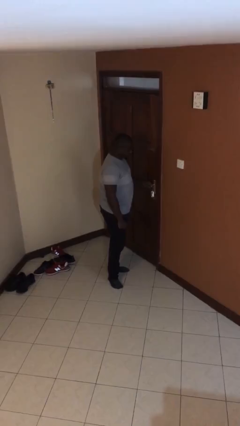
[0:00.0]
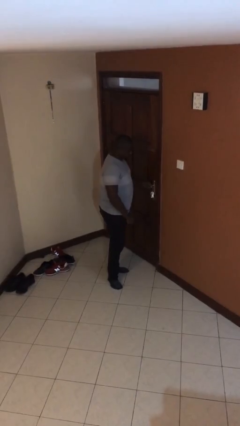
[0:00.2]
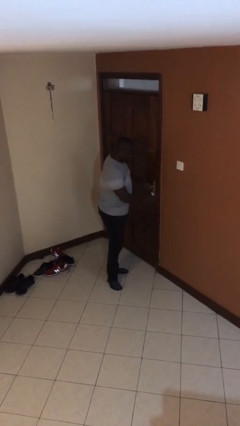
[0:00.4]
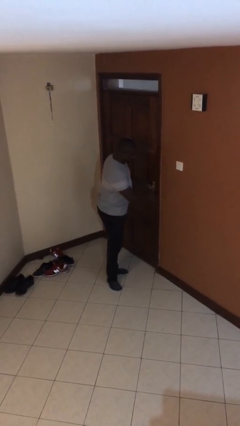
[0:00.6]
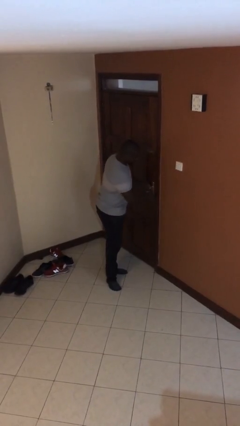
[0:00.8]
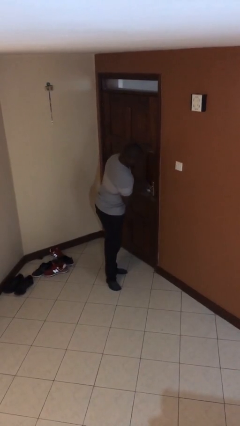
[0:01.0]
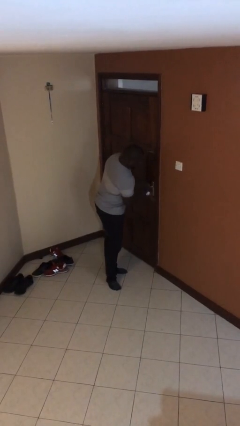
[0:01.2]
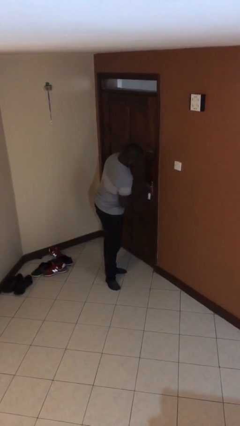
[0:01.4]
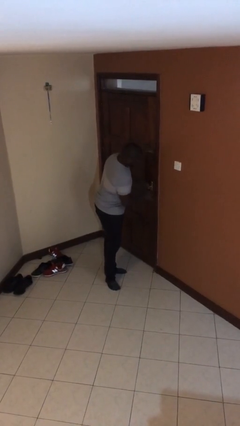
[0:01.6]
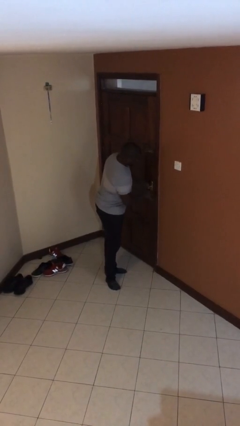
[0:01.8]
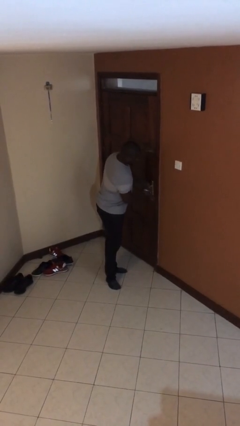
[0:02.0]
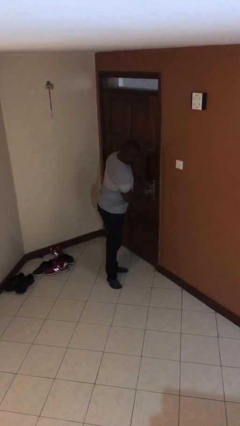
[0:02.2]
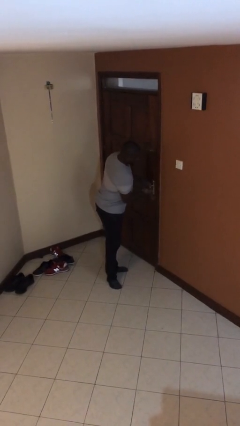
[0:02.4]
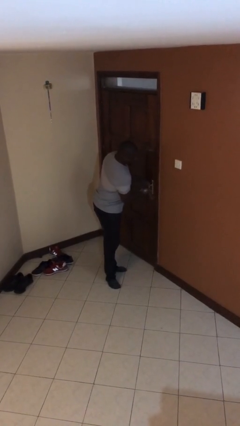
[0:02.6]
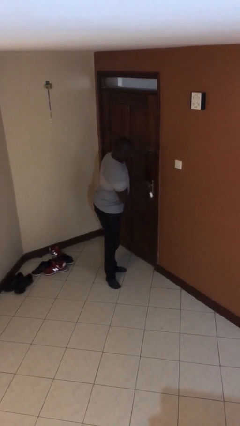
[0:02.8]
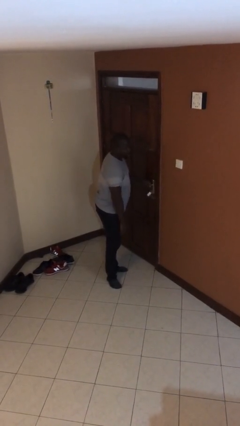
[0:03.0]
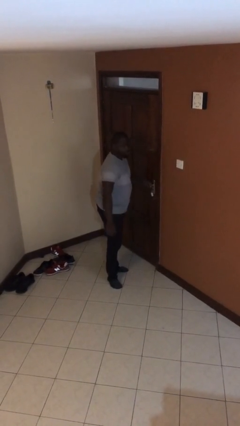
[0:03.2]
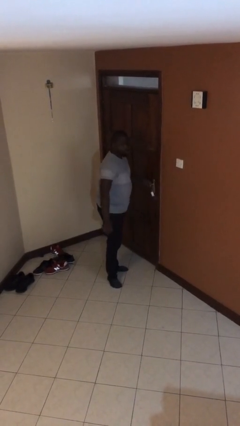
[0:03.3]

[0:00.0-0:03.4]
person locks door with keys

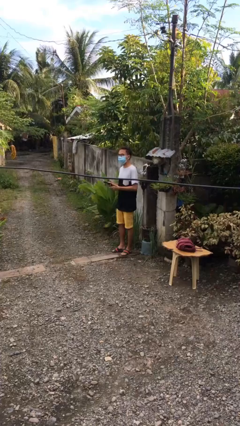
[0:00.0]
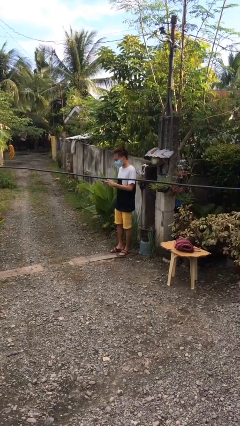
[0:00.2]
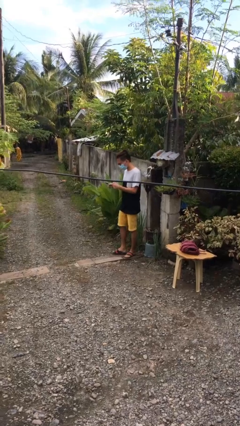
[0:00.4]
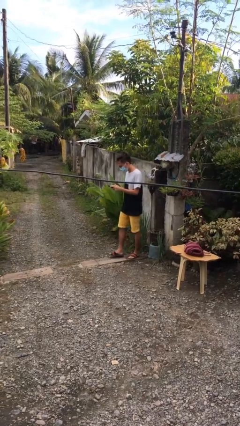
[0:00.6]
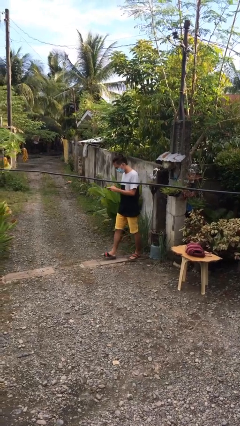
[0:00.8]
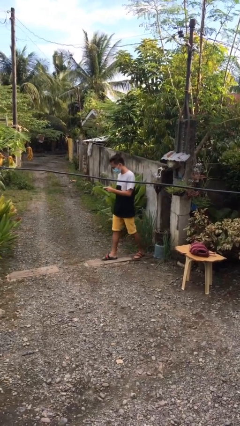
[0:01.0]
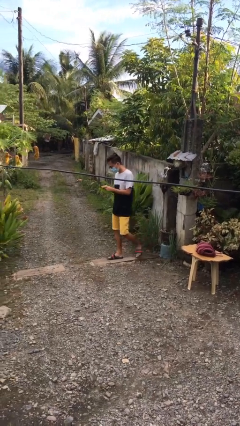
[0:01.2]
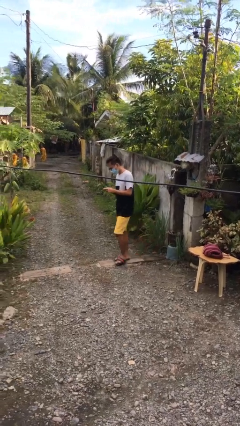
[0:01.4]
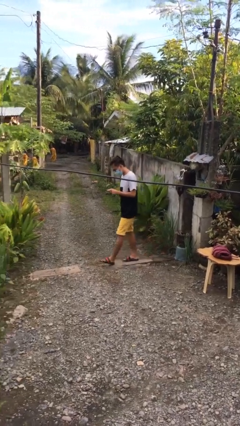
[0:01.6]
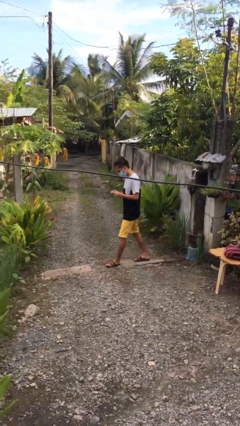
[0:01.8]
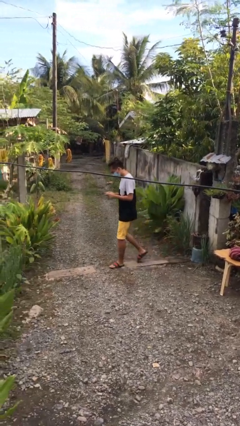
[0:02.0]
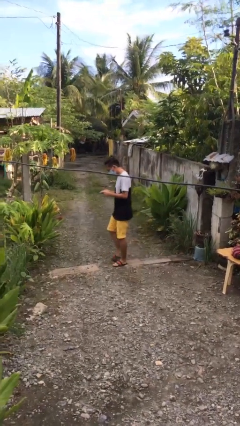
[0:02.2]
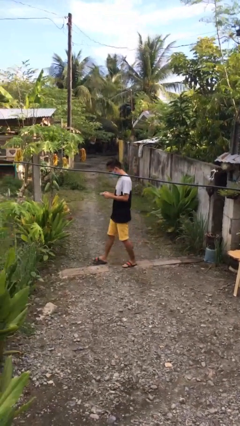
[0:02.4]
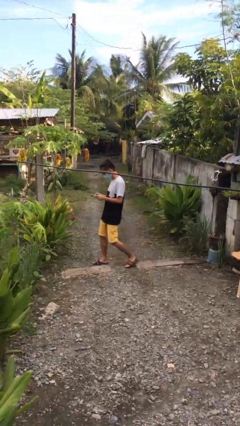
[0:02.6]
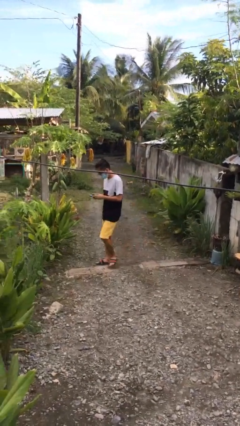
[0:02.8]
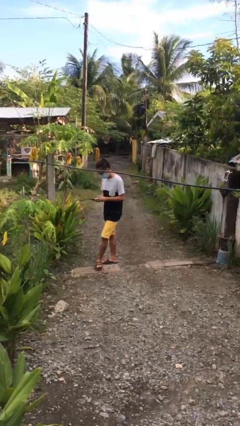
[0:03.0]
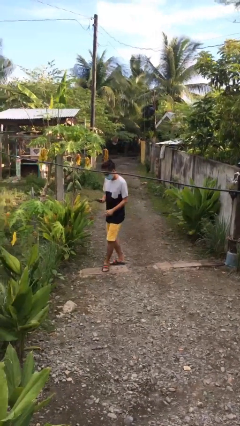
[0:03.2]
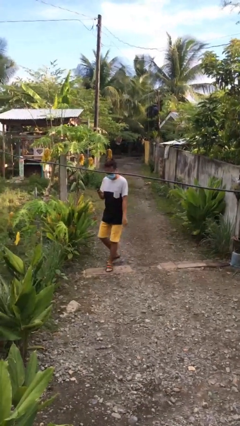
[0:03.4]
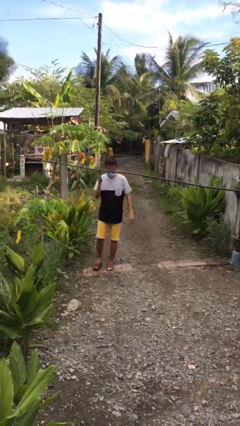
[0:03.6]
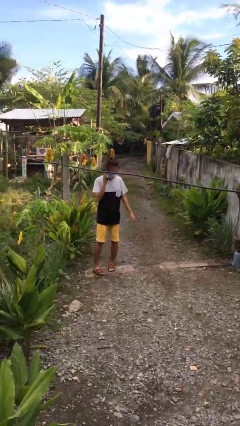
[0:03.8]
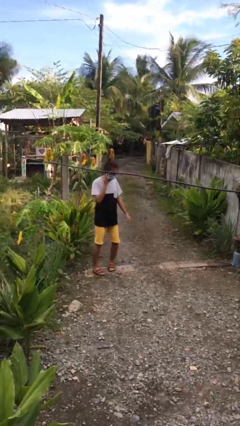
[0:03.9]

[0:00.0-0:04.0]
person texts on phone

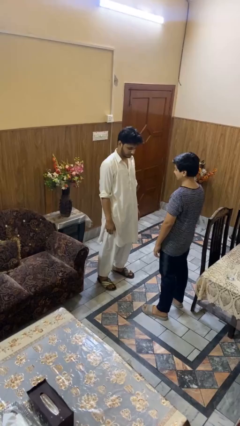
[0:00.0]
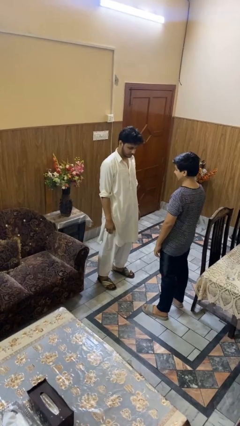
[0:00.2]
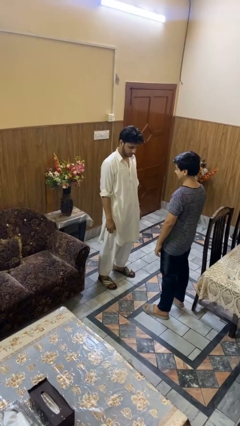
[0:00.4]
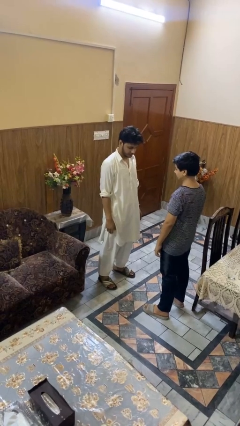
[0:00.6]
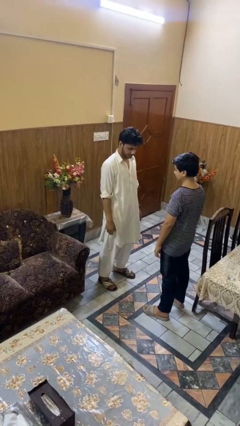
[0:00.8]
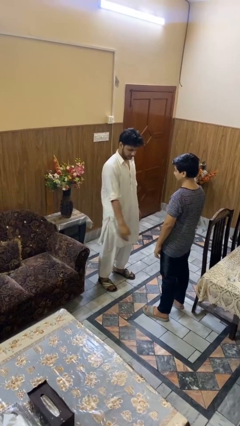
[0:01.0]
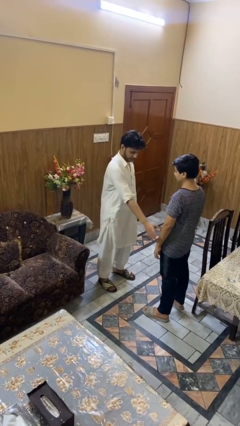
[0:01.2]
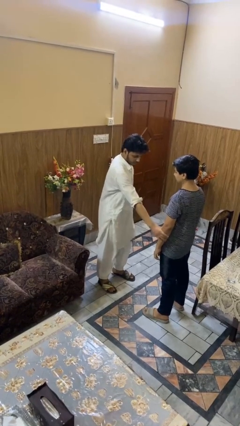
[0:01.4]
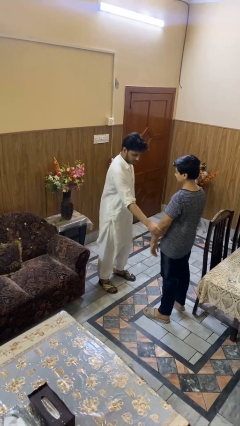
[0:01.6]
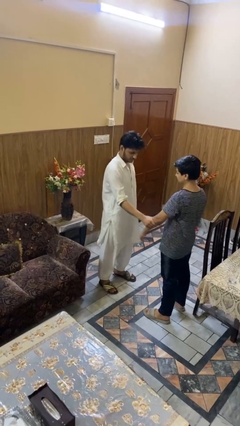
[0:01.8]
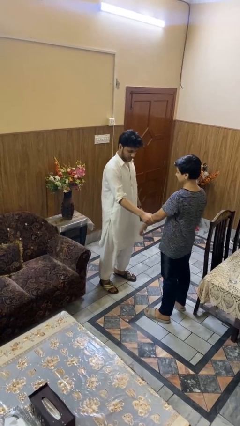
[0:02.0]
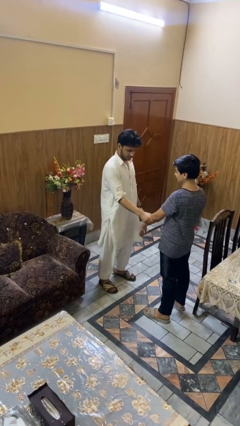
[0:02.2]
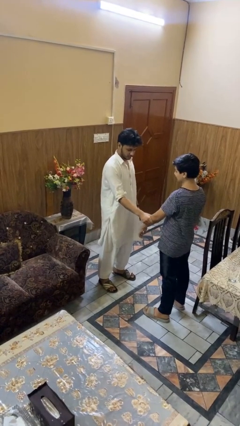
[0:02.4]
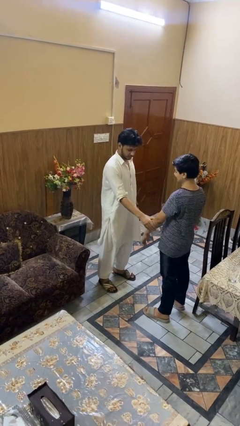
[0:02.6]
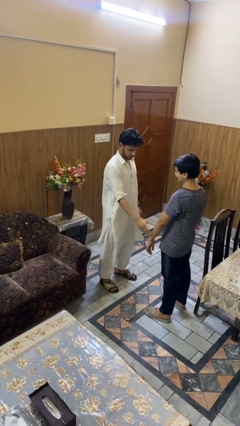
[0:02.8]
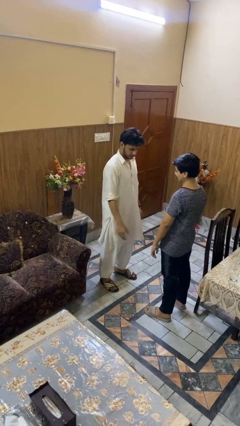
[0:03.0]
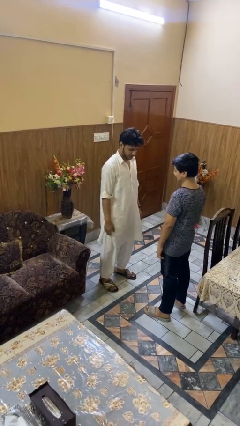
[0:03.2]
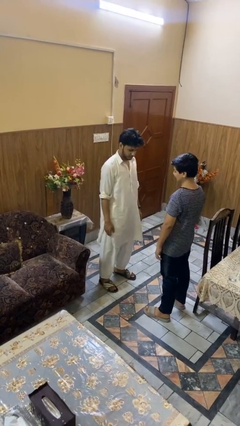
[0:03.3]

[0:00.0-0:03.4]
person grabs person by forearm

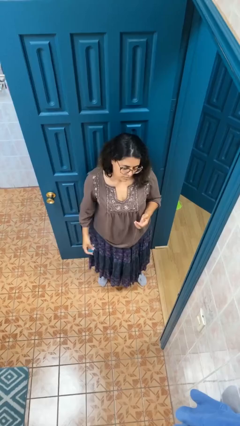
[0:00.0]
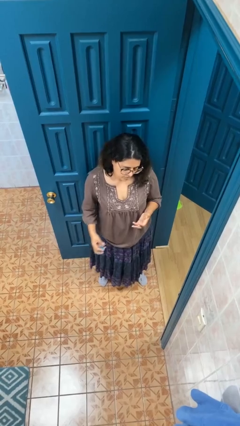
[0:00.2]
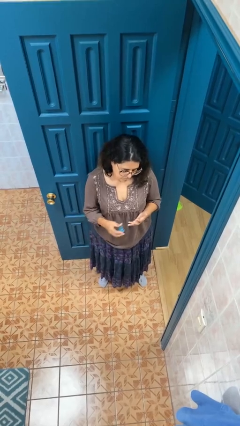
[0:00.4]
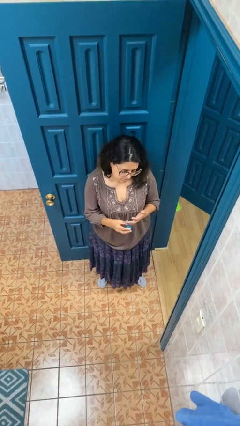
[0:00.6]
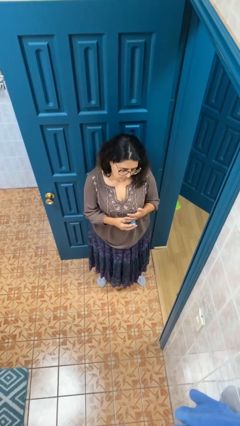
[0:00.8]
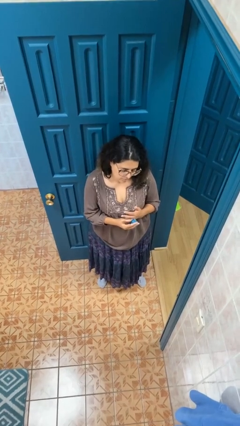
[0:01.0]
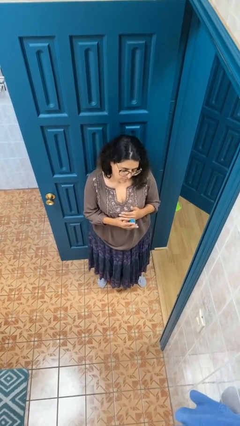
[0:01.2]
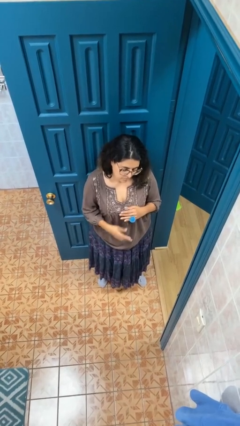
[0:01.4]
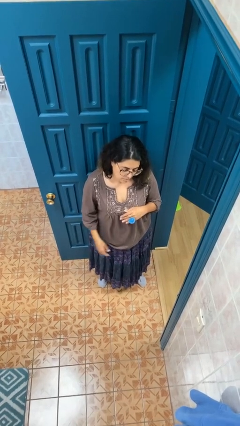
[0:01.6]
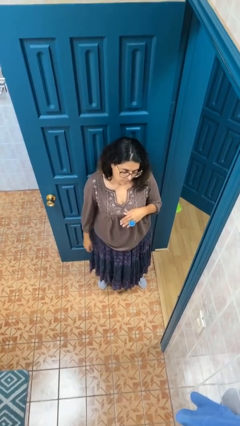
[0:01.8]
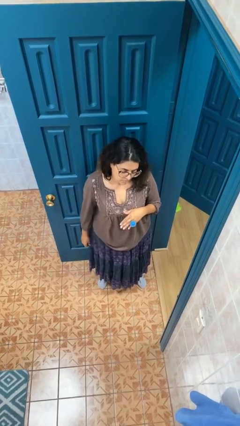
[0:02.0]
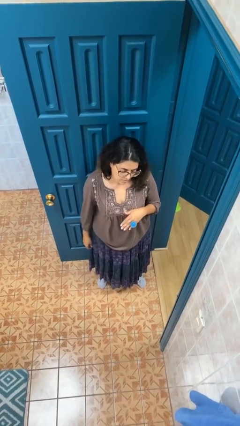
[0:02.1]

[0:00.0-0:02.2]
person puts on ring

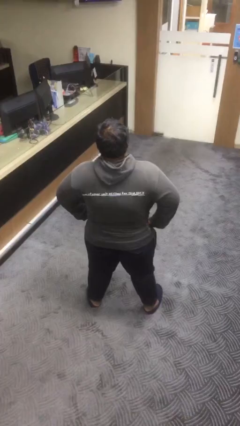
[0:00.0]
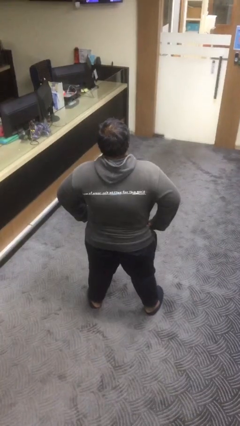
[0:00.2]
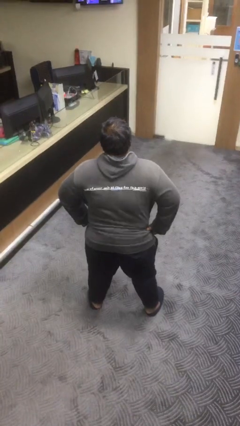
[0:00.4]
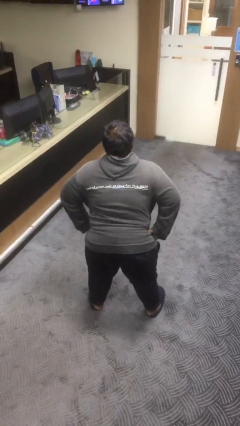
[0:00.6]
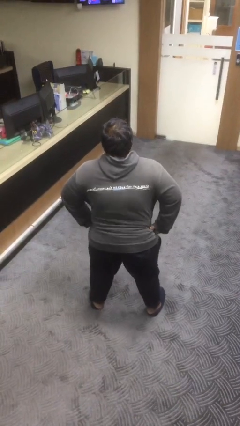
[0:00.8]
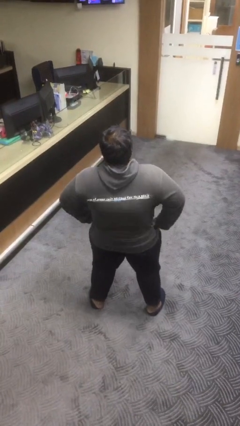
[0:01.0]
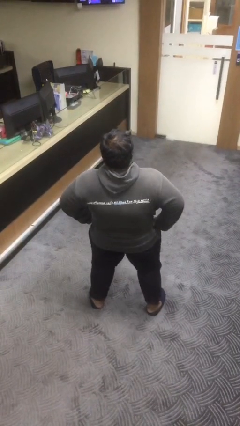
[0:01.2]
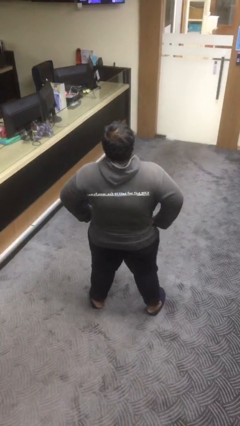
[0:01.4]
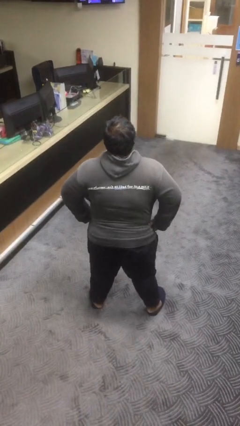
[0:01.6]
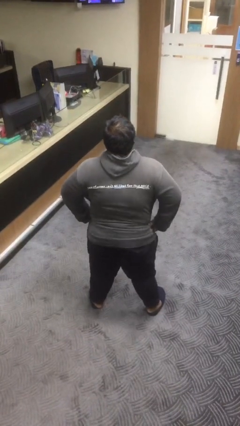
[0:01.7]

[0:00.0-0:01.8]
person wiggles hips

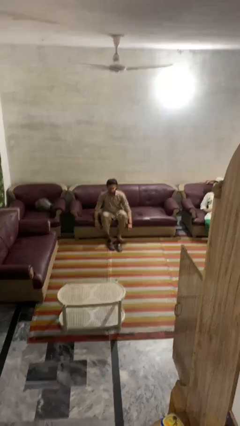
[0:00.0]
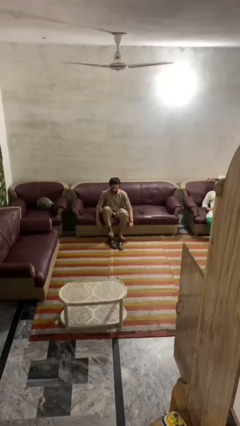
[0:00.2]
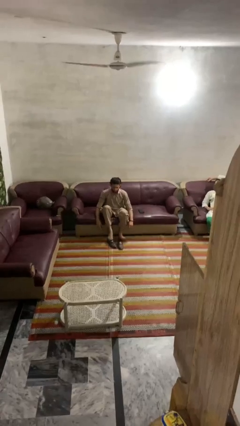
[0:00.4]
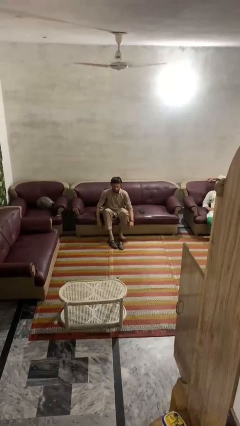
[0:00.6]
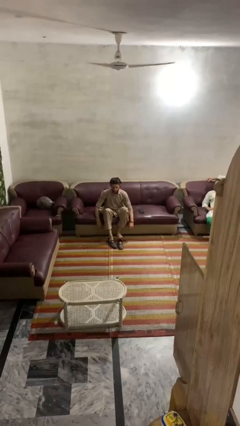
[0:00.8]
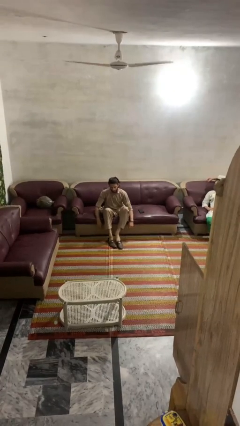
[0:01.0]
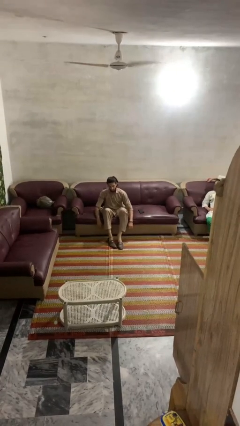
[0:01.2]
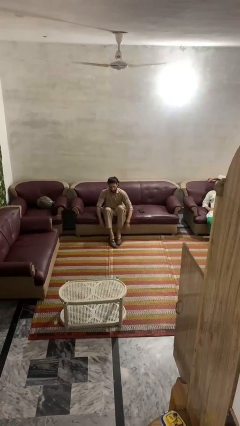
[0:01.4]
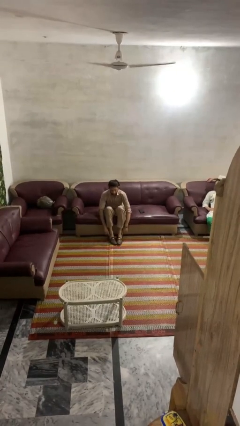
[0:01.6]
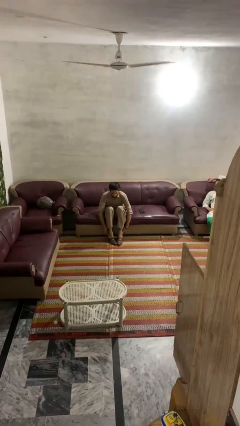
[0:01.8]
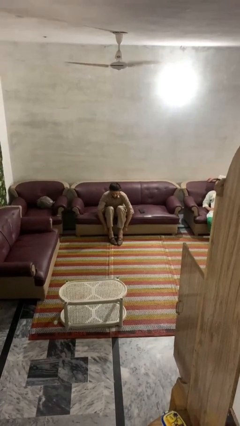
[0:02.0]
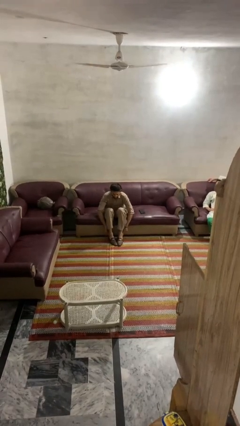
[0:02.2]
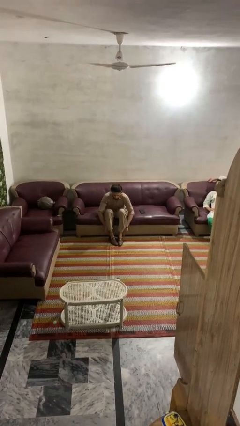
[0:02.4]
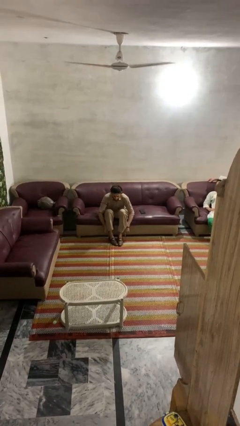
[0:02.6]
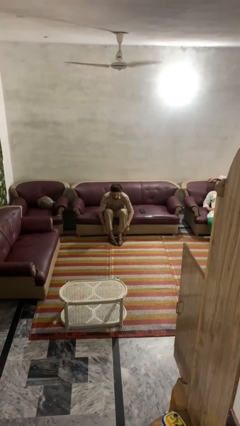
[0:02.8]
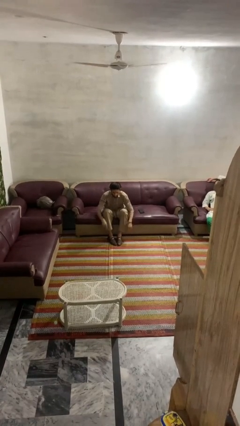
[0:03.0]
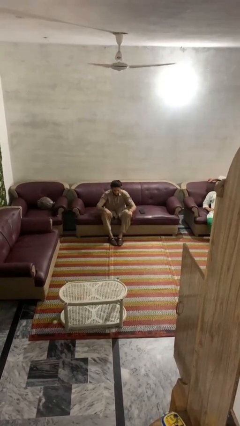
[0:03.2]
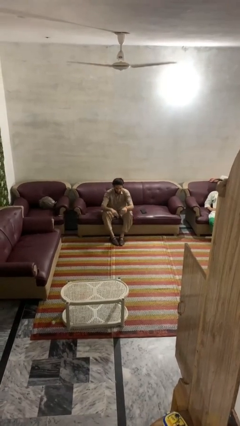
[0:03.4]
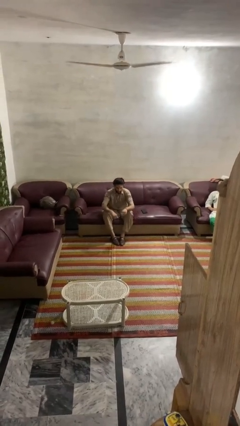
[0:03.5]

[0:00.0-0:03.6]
person puts on shoes
